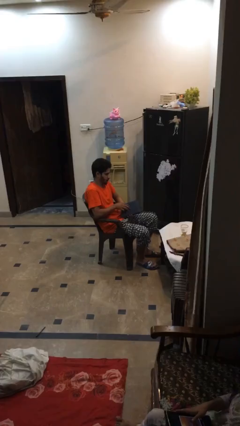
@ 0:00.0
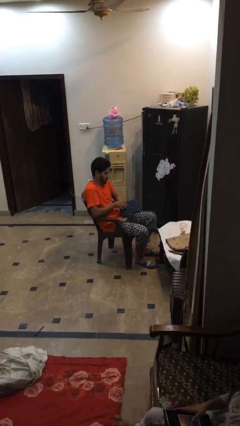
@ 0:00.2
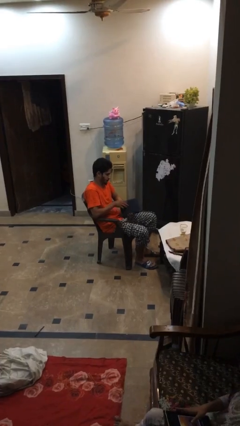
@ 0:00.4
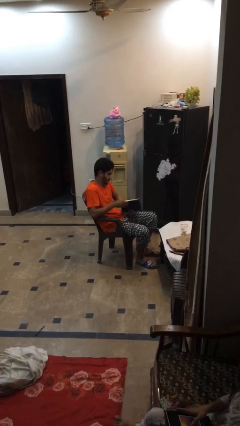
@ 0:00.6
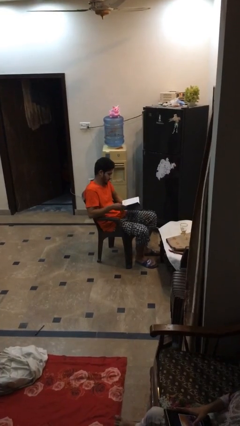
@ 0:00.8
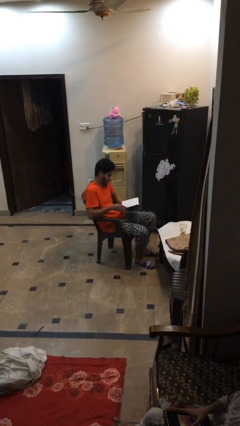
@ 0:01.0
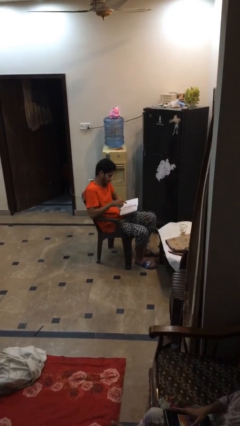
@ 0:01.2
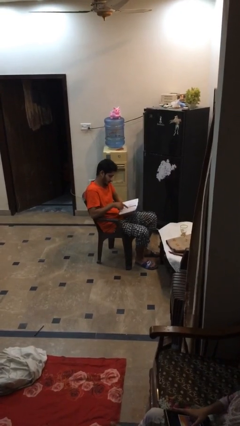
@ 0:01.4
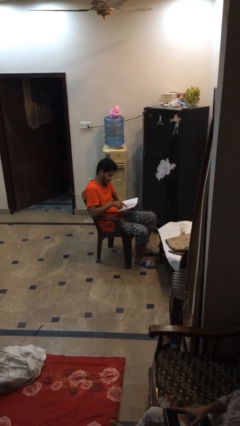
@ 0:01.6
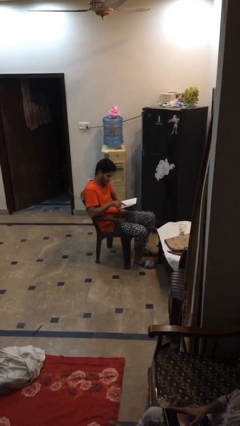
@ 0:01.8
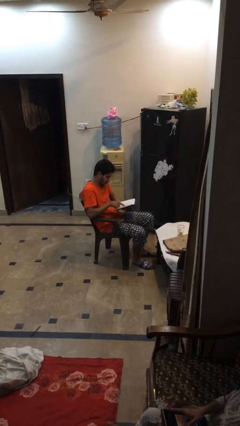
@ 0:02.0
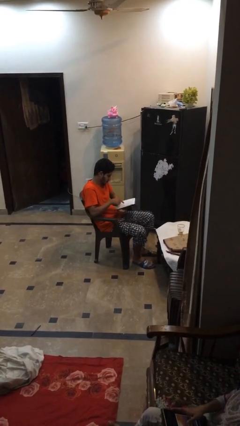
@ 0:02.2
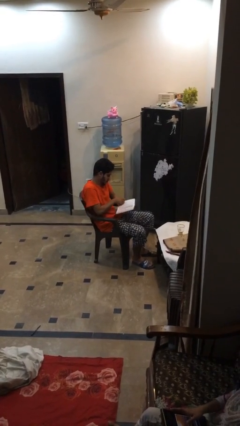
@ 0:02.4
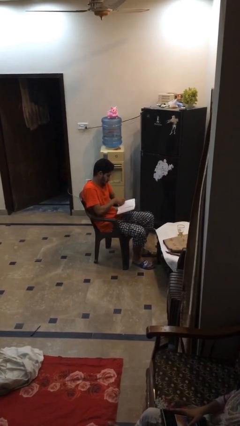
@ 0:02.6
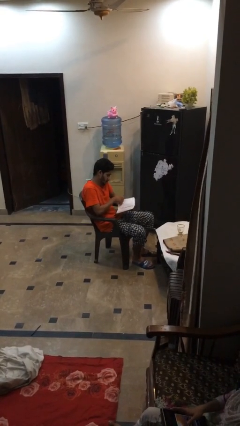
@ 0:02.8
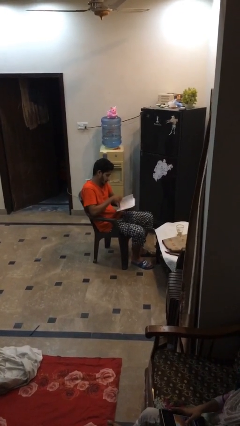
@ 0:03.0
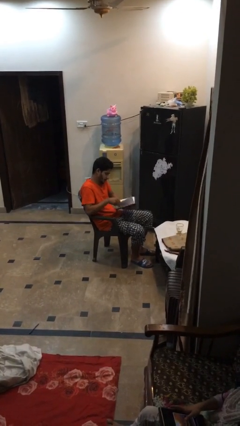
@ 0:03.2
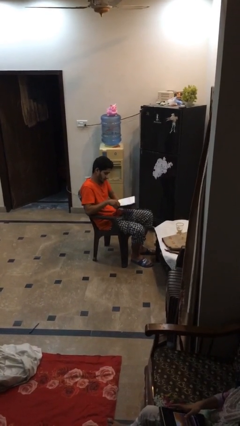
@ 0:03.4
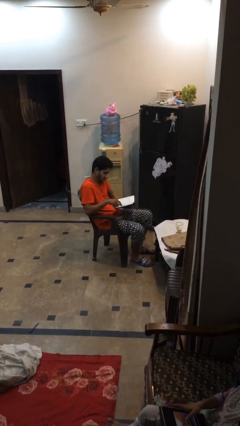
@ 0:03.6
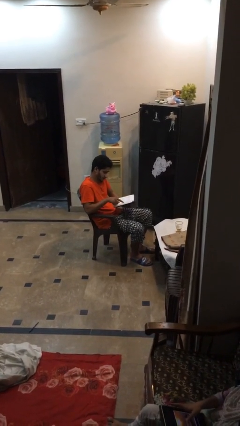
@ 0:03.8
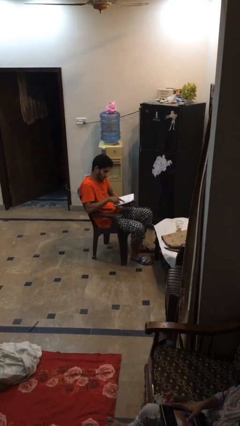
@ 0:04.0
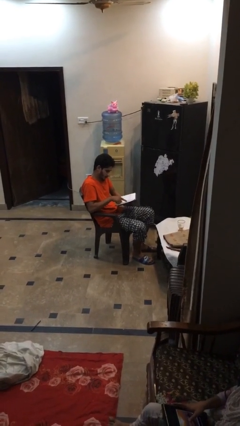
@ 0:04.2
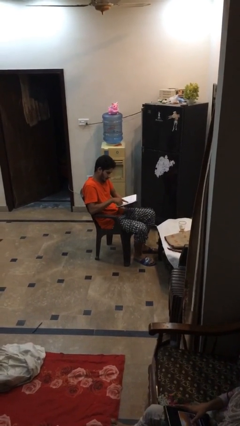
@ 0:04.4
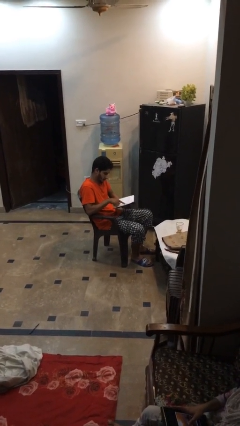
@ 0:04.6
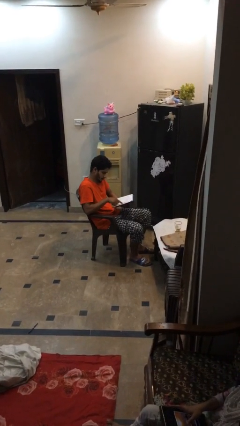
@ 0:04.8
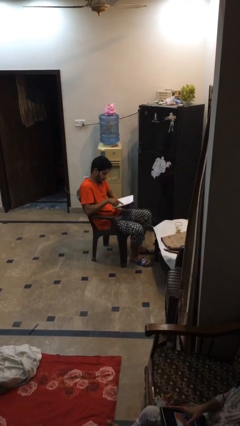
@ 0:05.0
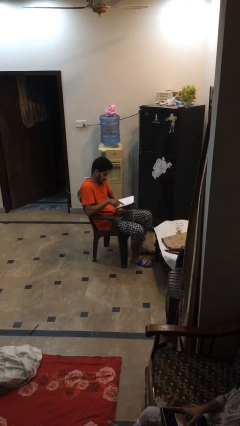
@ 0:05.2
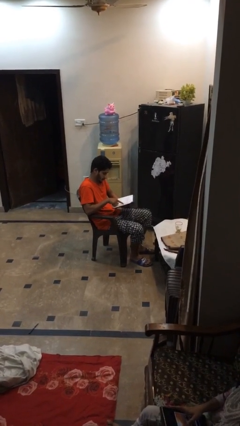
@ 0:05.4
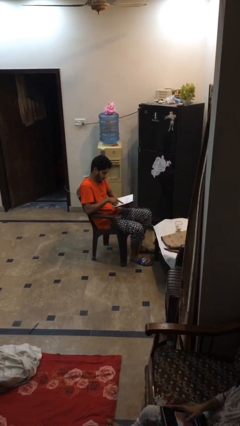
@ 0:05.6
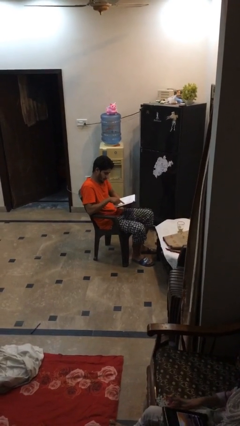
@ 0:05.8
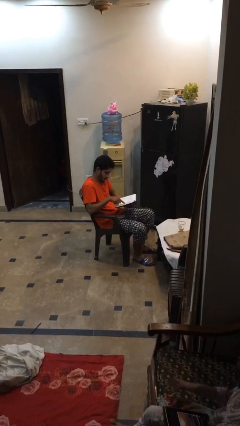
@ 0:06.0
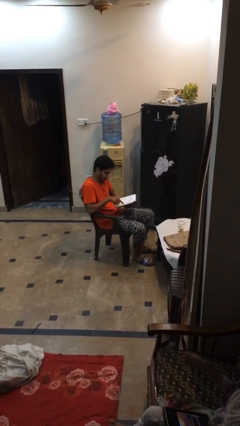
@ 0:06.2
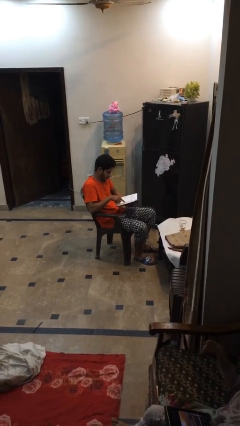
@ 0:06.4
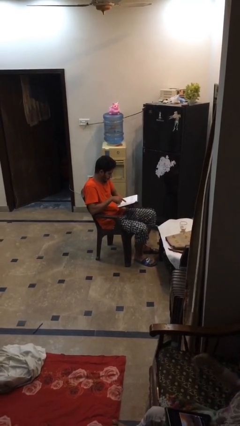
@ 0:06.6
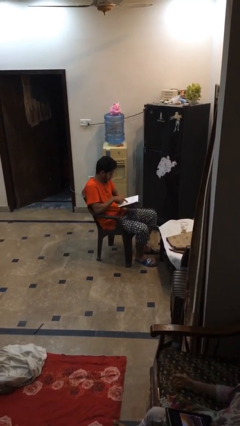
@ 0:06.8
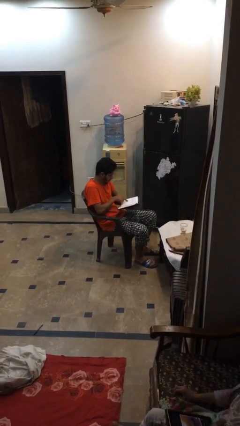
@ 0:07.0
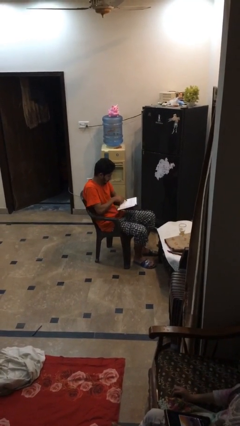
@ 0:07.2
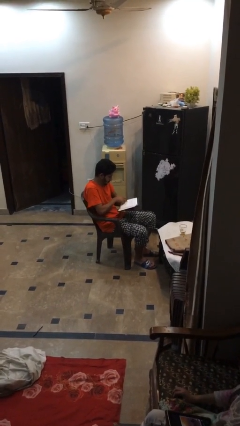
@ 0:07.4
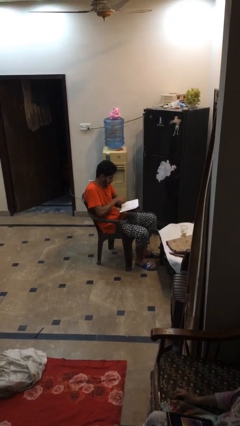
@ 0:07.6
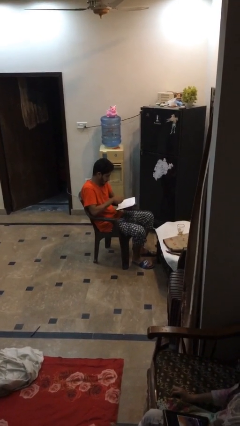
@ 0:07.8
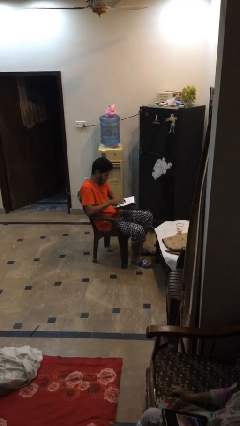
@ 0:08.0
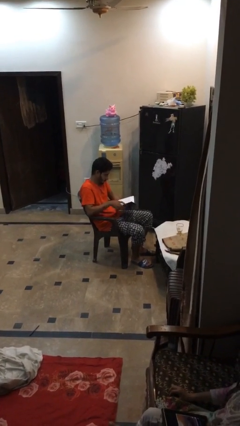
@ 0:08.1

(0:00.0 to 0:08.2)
person reads document

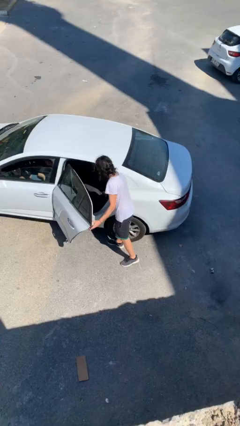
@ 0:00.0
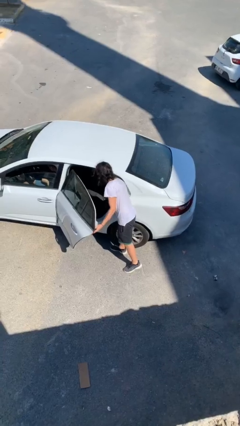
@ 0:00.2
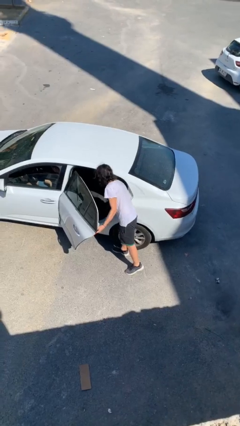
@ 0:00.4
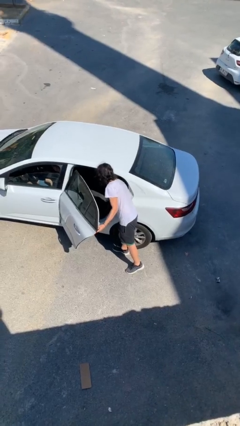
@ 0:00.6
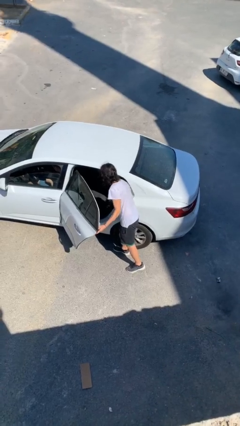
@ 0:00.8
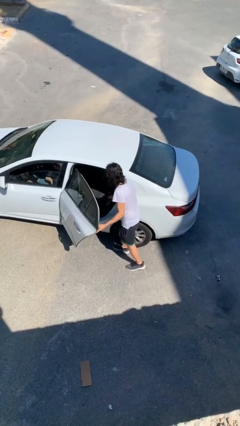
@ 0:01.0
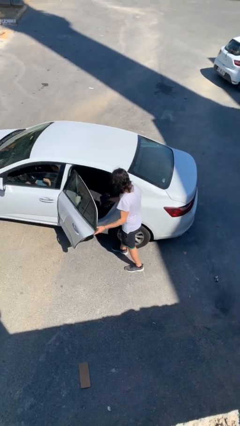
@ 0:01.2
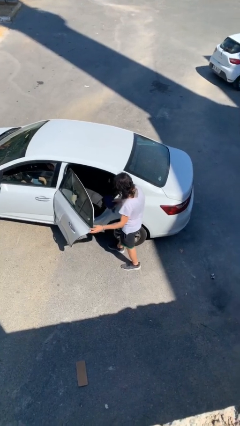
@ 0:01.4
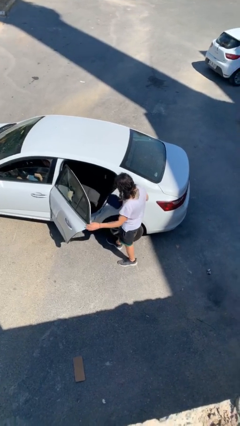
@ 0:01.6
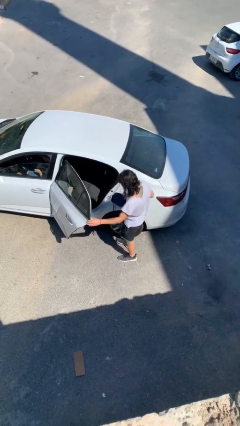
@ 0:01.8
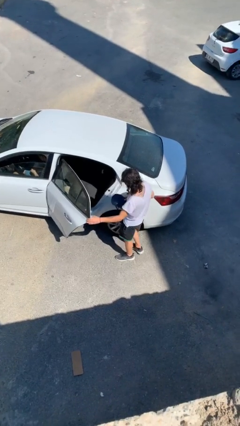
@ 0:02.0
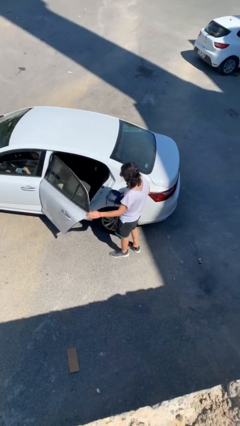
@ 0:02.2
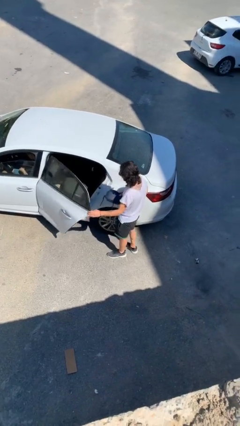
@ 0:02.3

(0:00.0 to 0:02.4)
person unloads car

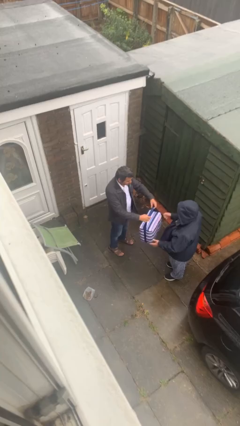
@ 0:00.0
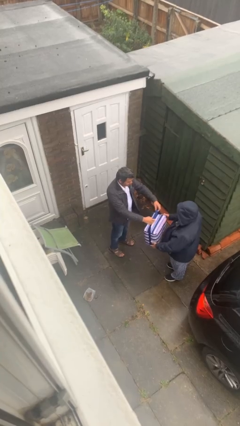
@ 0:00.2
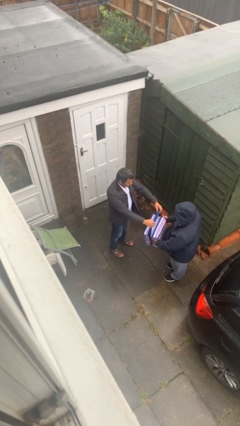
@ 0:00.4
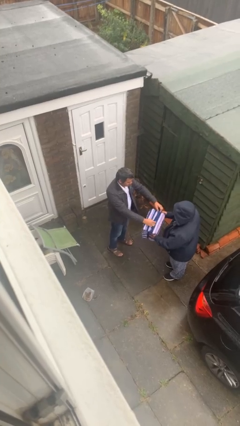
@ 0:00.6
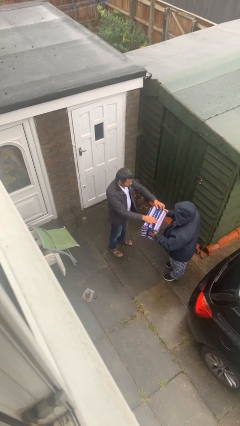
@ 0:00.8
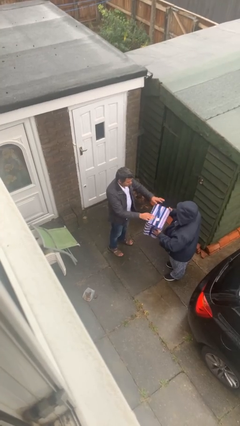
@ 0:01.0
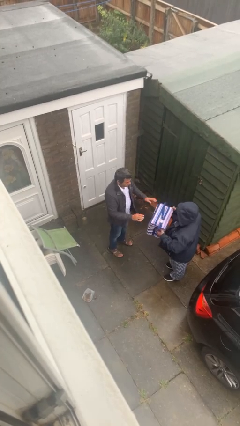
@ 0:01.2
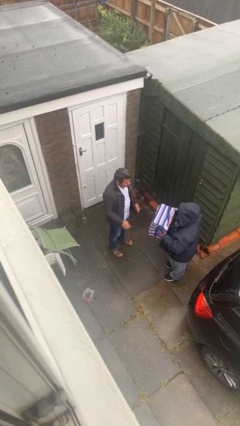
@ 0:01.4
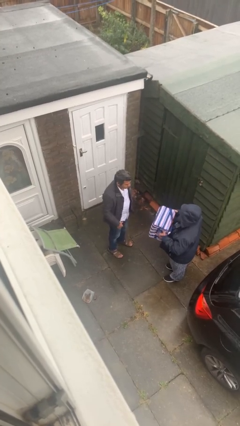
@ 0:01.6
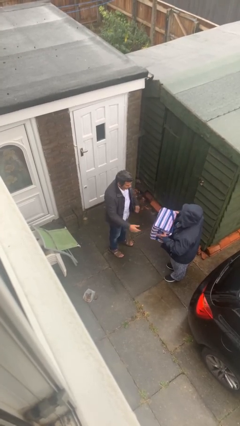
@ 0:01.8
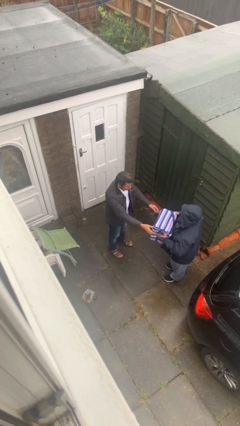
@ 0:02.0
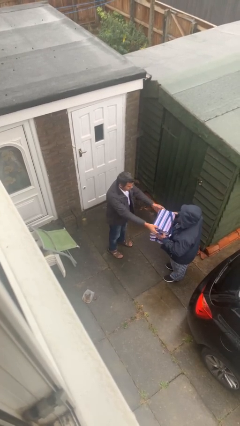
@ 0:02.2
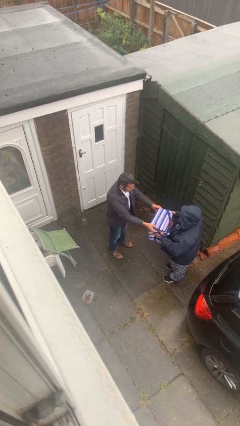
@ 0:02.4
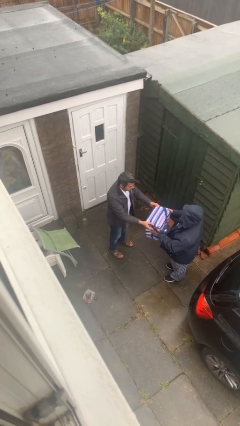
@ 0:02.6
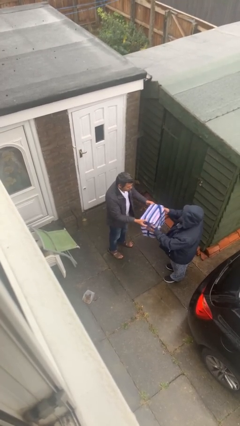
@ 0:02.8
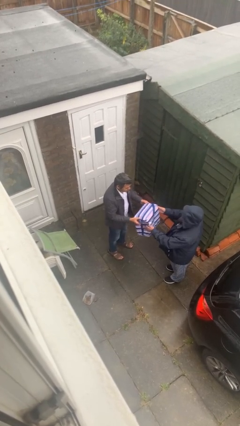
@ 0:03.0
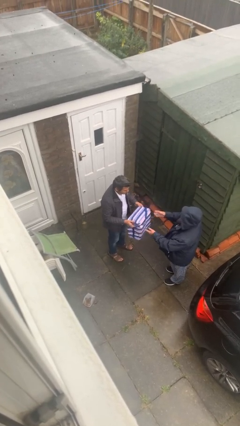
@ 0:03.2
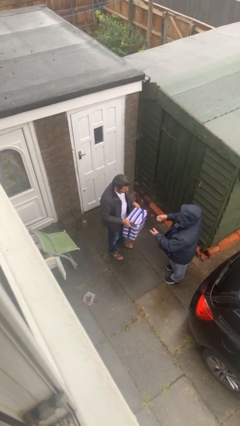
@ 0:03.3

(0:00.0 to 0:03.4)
person transfers object to person

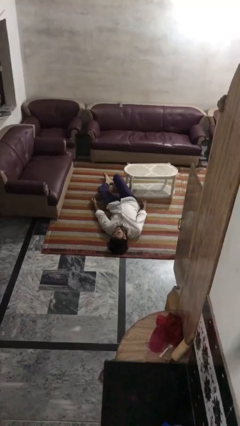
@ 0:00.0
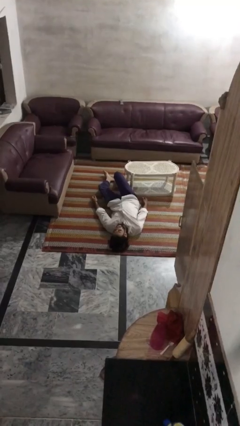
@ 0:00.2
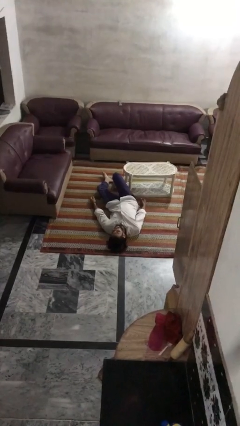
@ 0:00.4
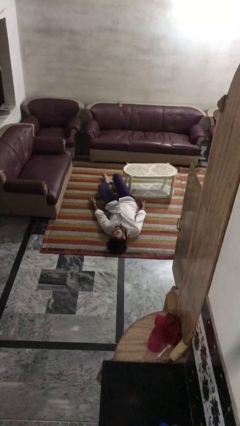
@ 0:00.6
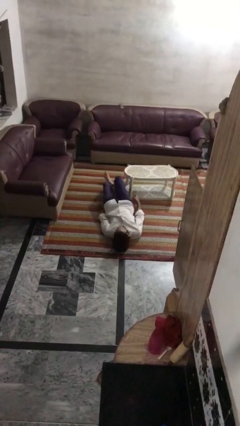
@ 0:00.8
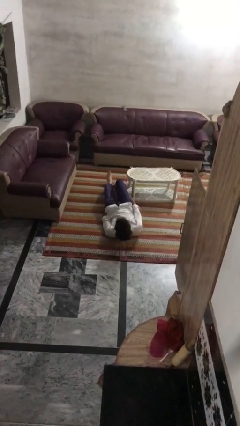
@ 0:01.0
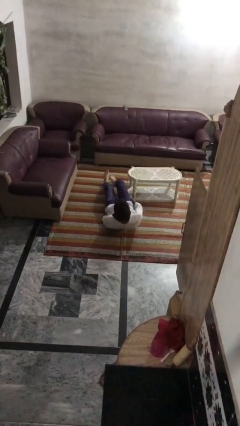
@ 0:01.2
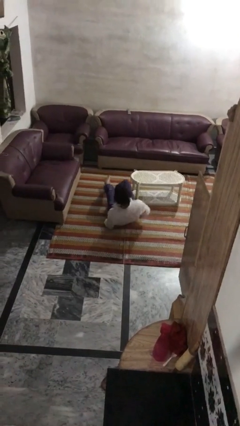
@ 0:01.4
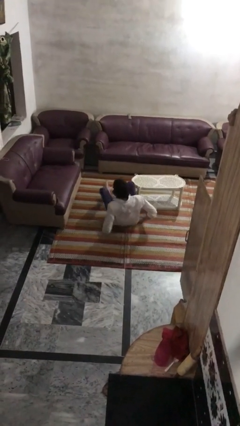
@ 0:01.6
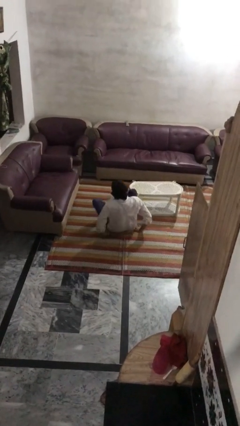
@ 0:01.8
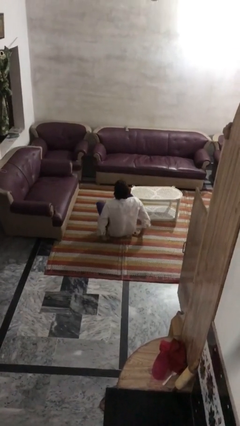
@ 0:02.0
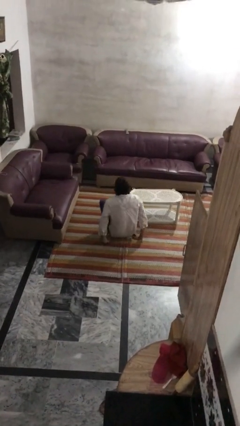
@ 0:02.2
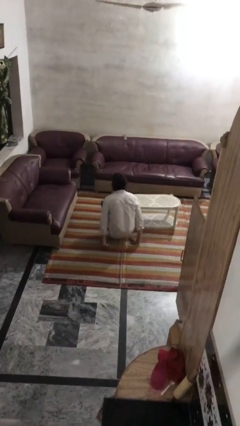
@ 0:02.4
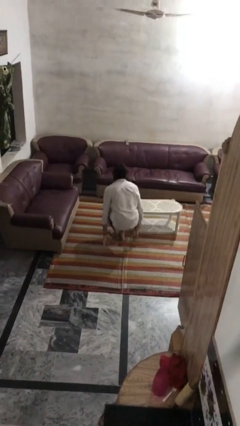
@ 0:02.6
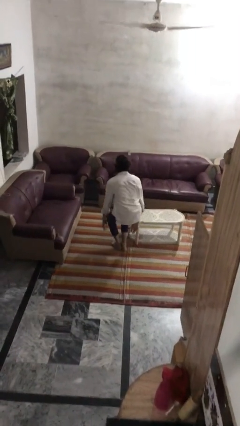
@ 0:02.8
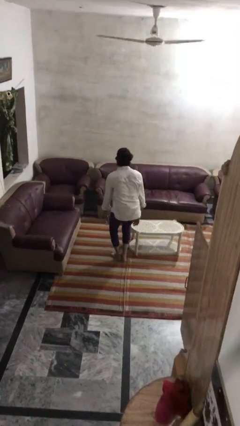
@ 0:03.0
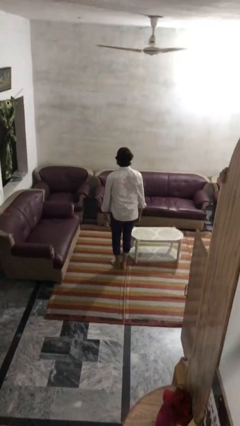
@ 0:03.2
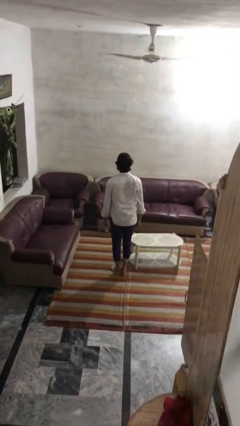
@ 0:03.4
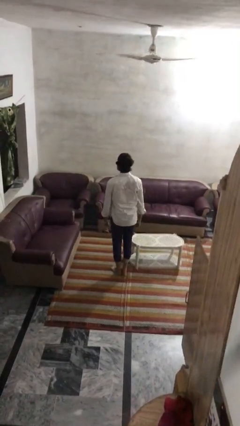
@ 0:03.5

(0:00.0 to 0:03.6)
person stands up from floor
